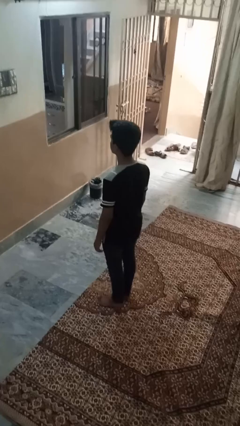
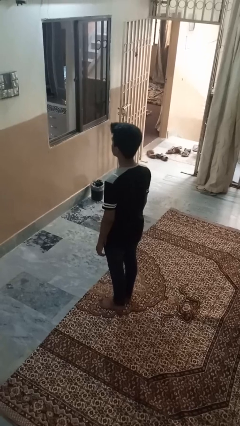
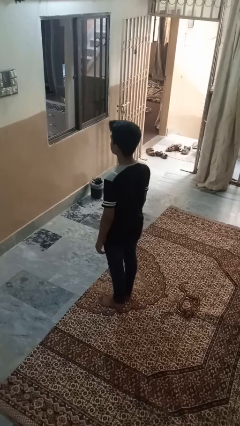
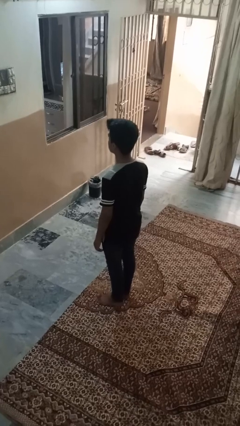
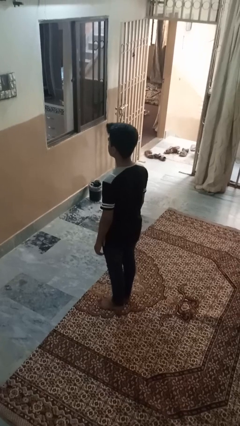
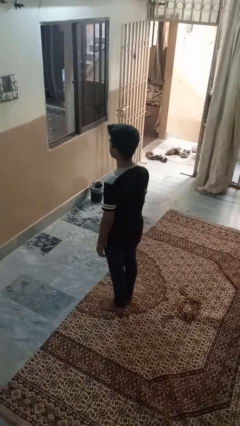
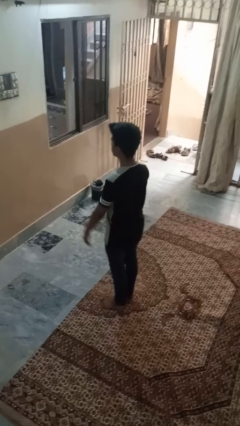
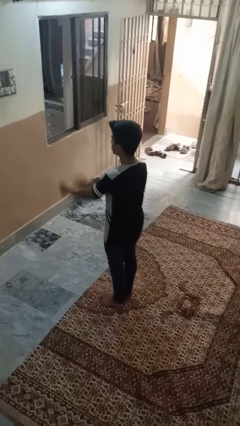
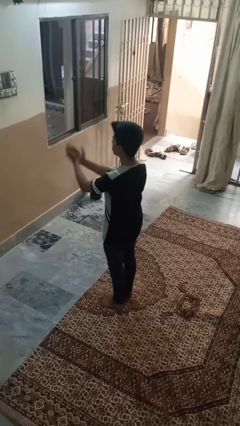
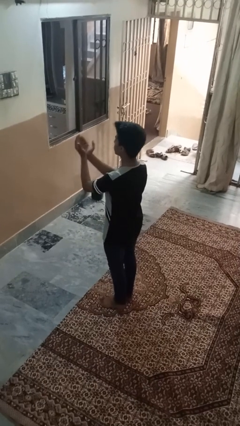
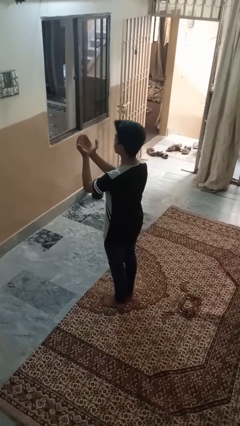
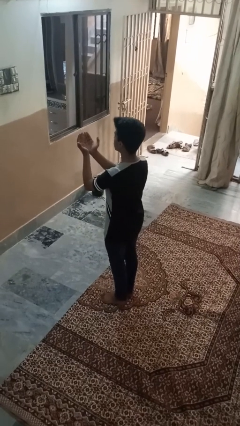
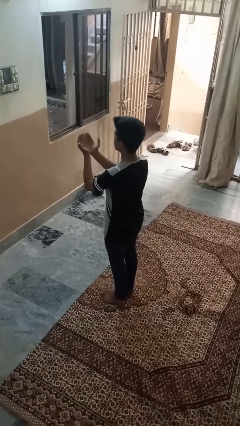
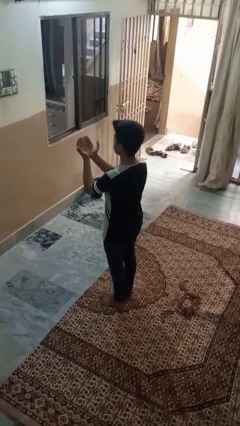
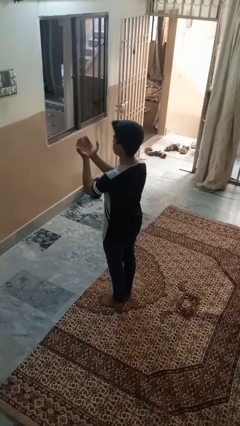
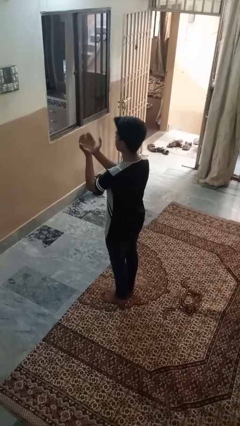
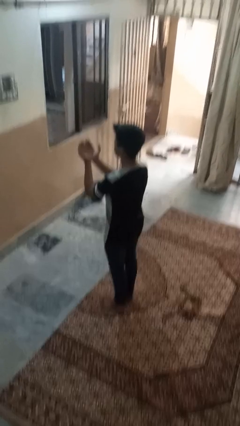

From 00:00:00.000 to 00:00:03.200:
person prays

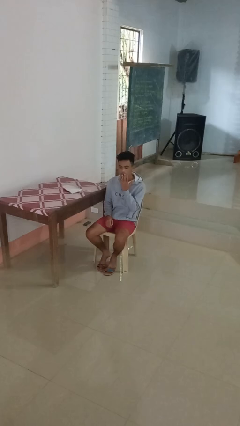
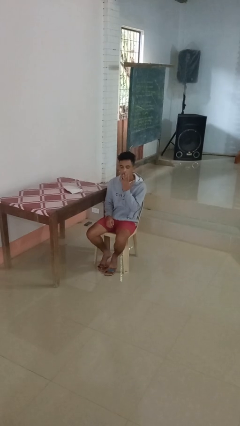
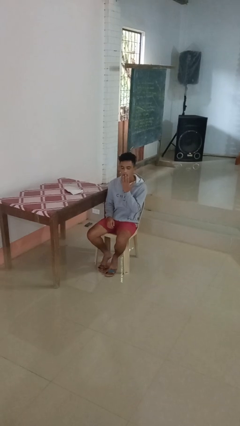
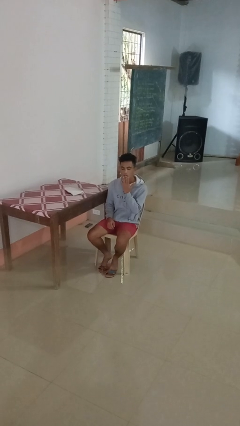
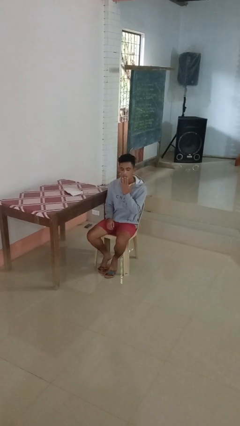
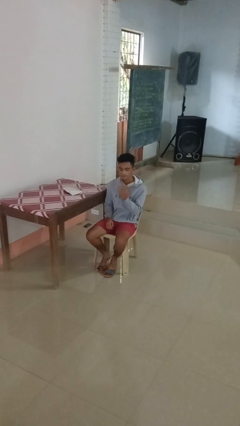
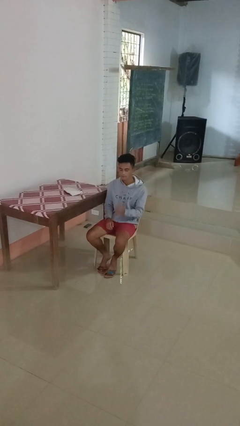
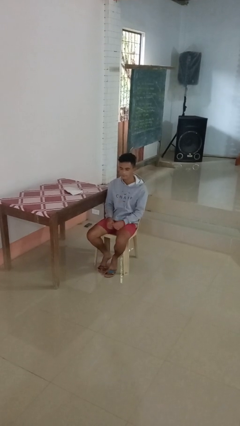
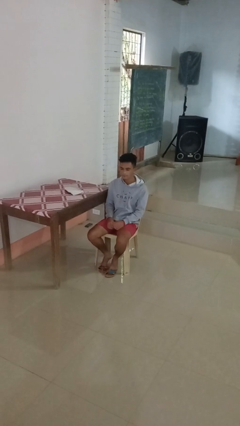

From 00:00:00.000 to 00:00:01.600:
person licks fingers

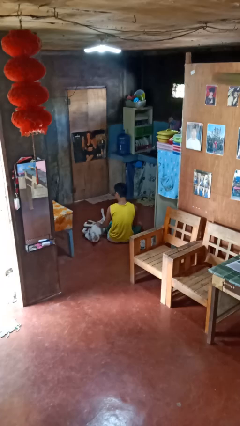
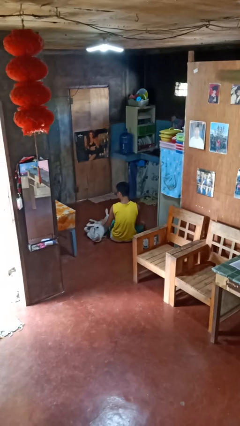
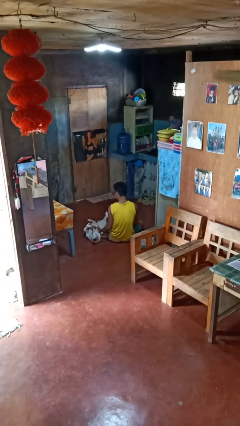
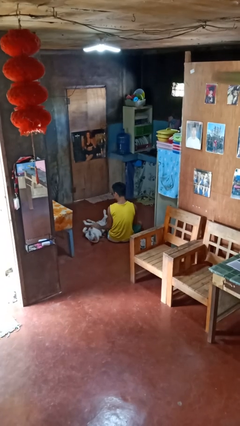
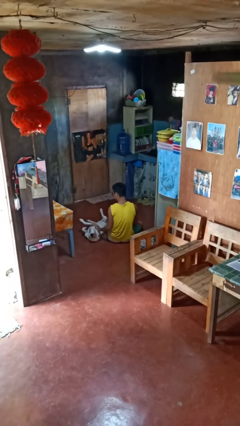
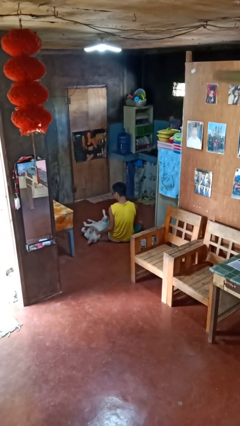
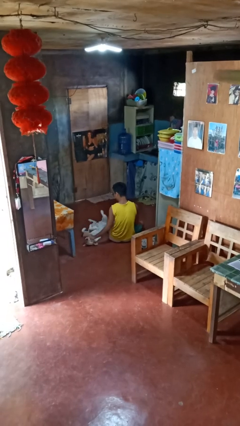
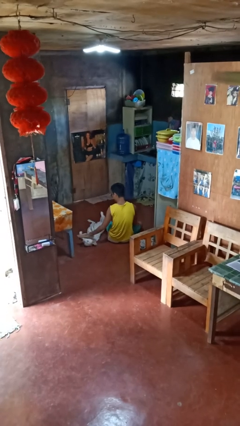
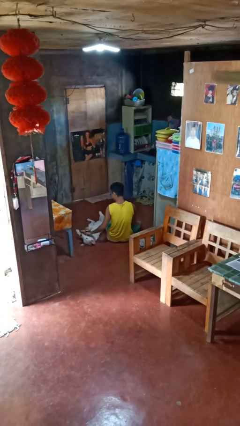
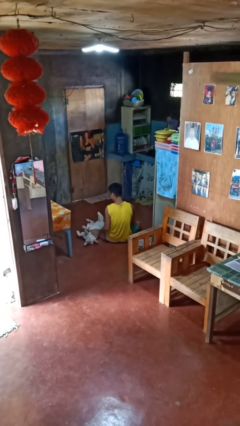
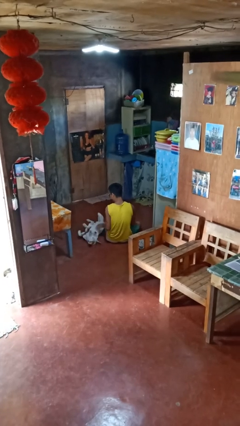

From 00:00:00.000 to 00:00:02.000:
person pets dog

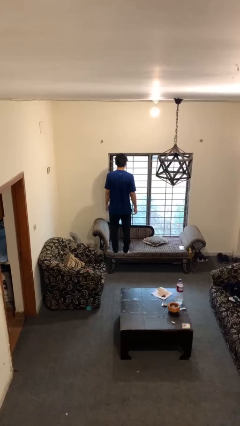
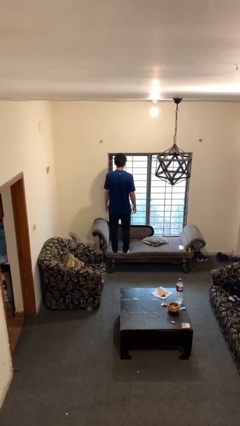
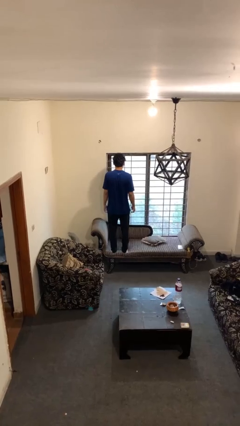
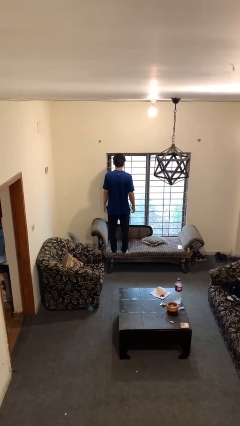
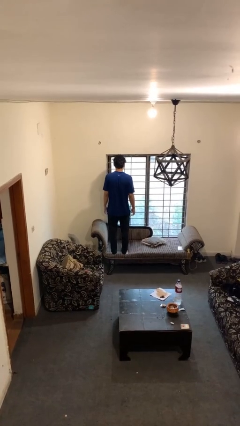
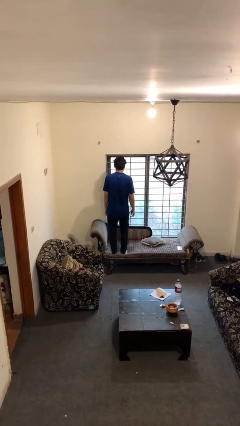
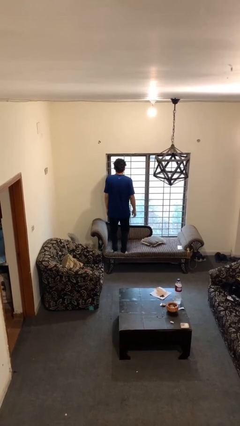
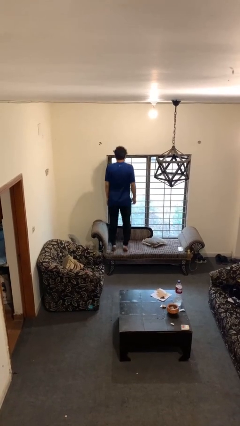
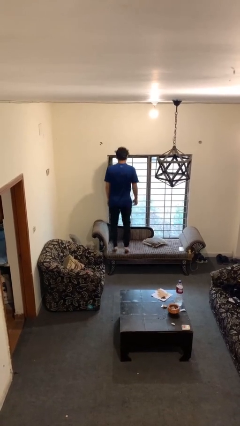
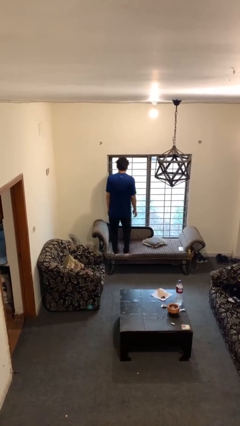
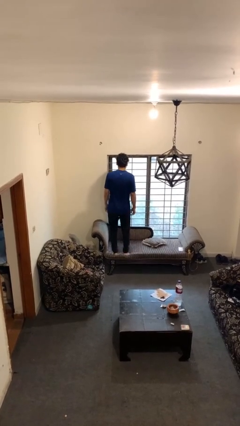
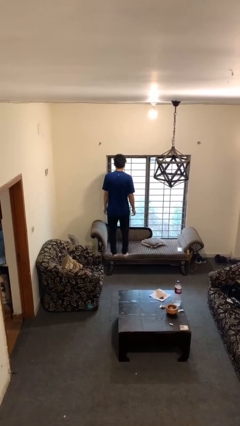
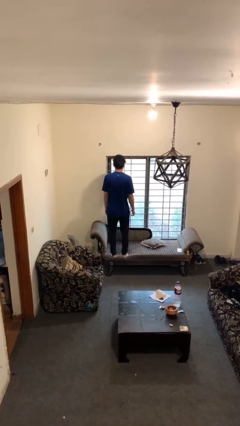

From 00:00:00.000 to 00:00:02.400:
person jumps on couch

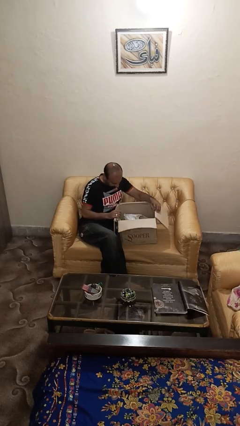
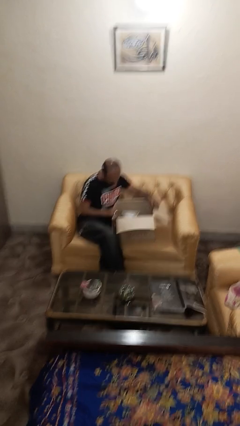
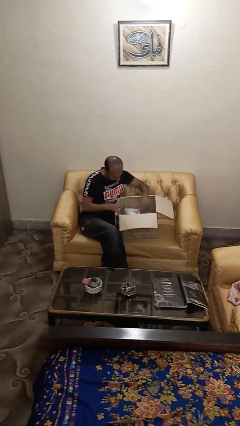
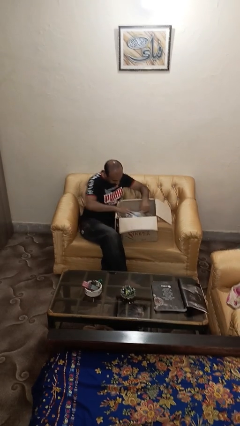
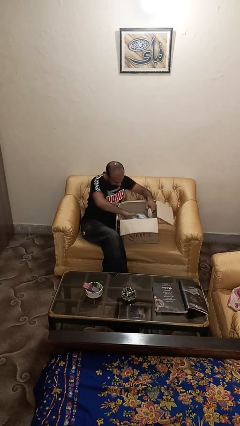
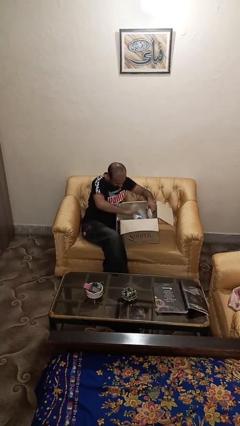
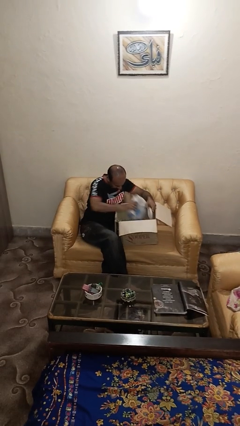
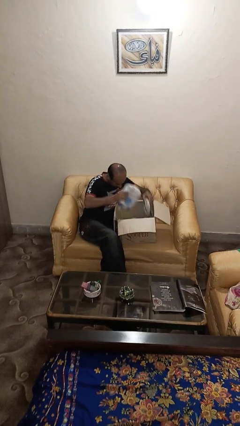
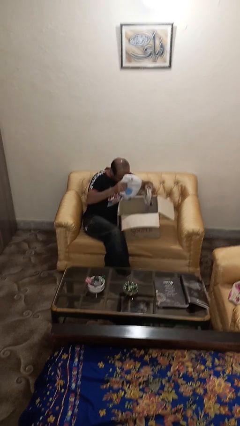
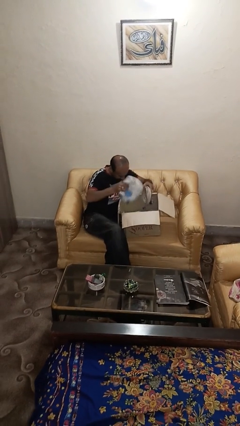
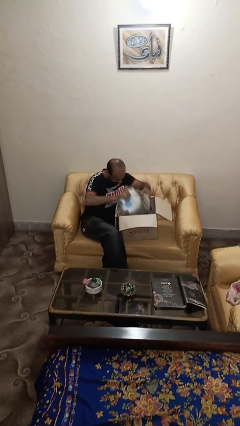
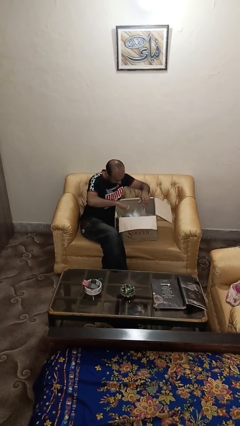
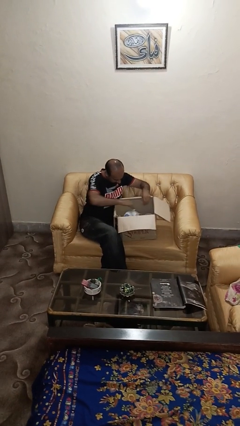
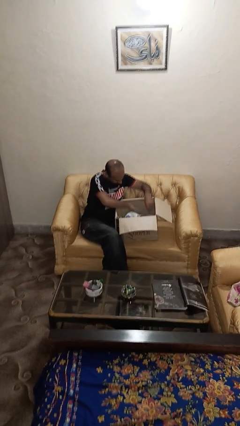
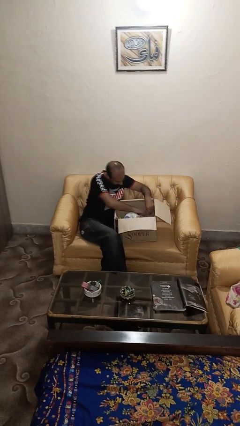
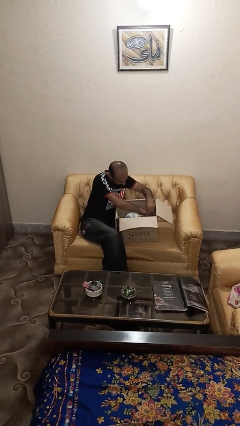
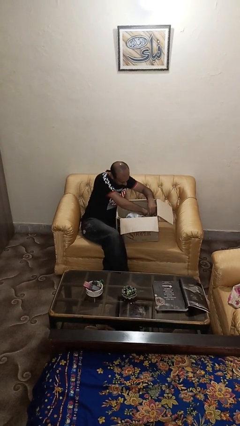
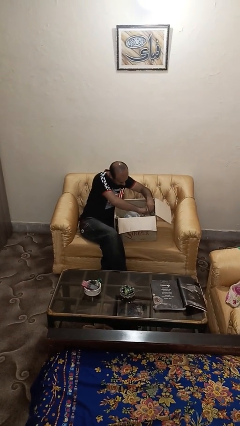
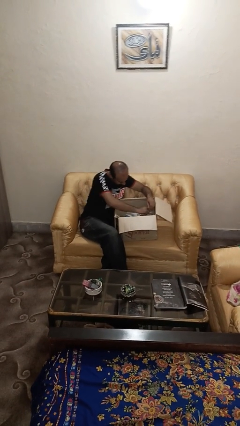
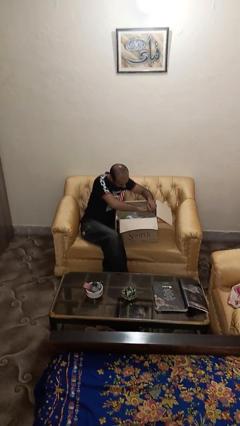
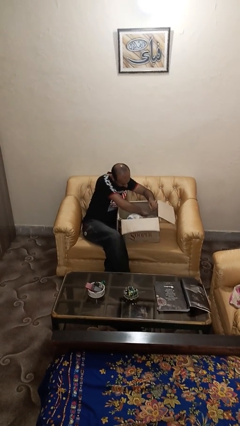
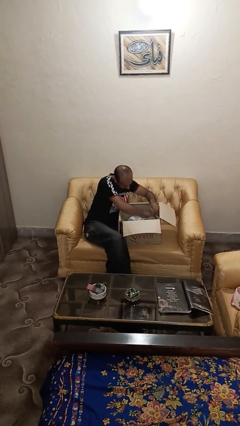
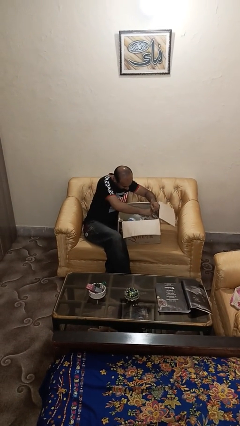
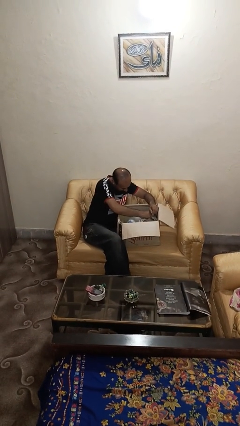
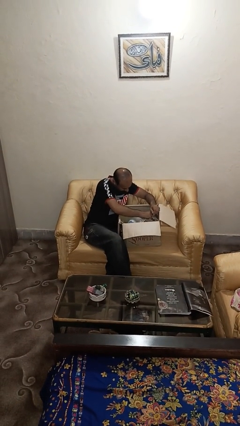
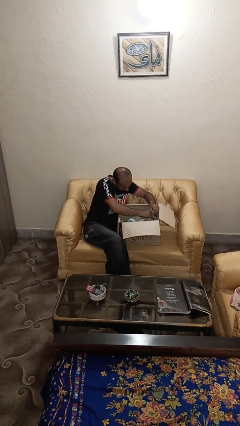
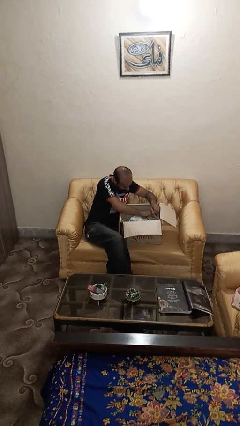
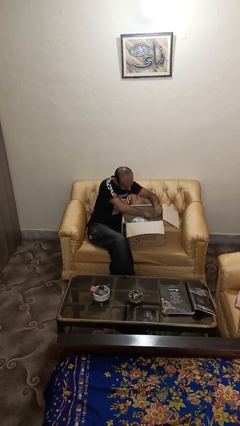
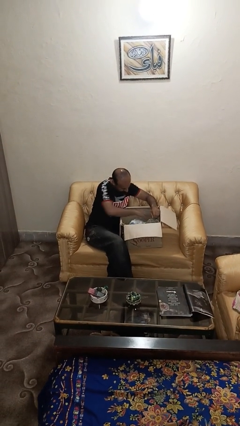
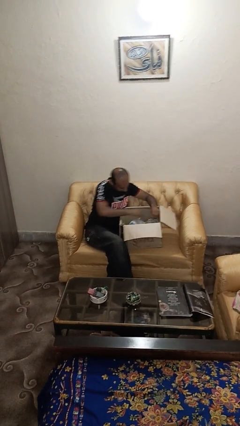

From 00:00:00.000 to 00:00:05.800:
person searches in box

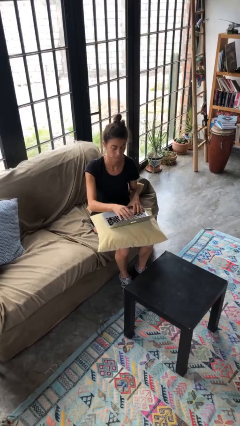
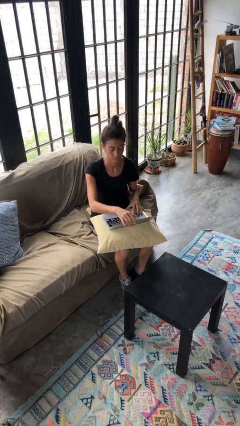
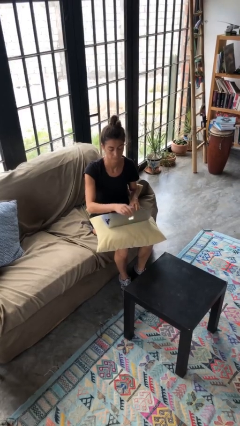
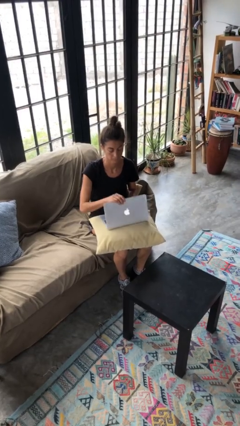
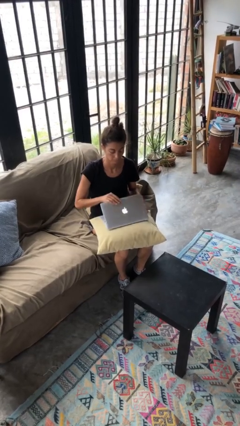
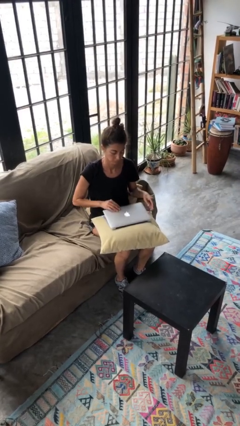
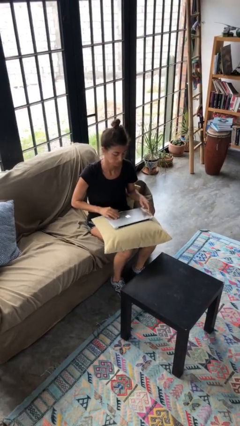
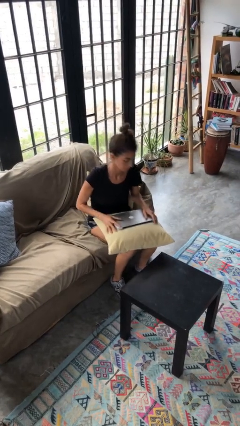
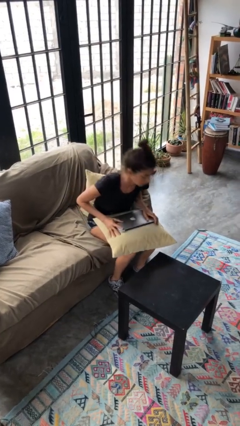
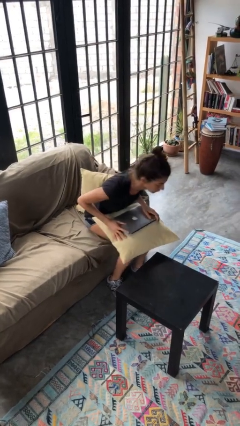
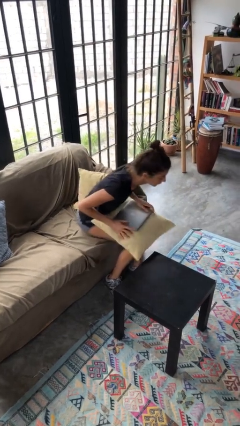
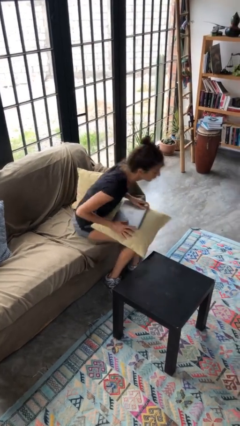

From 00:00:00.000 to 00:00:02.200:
person closes laptop

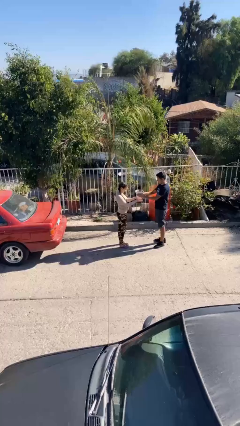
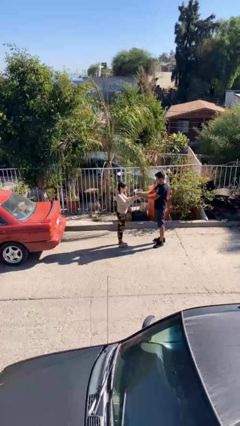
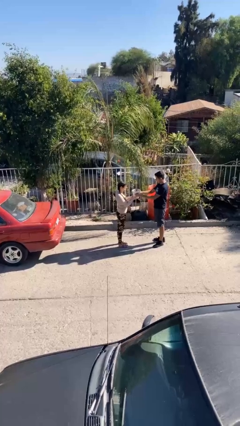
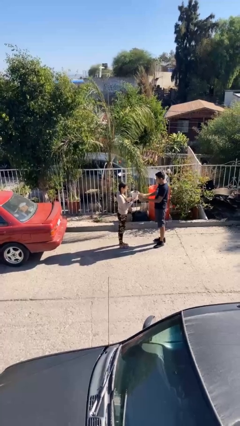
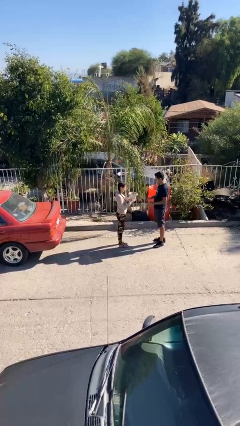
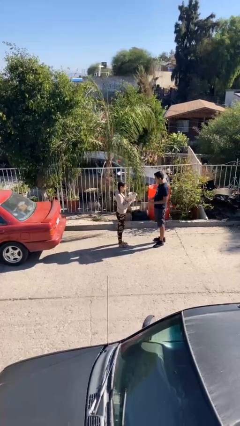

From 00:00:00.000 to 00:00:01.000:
person transfers object to person
